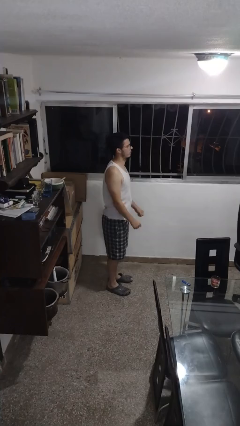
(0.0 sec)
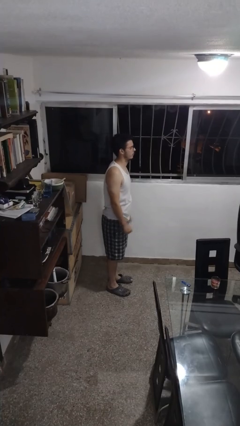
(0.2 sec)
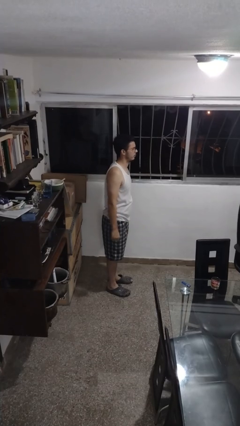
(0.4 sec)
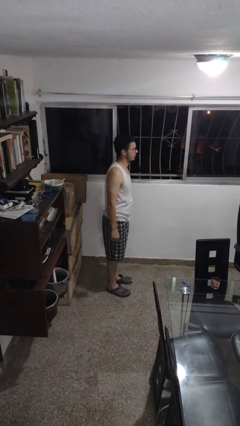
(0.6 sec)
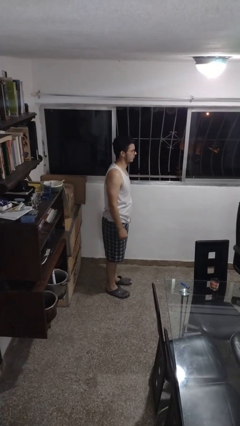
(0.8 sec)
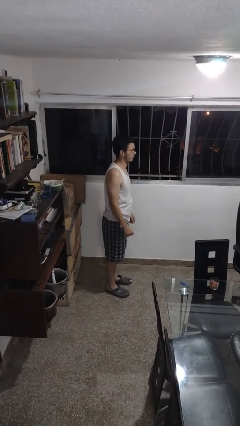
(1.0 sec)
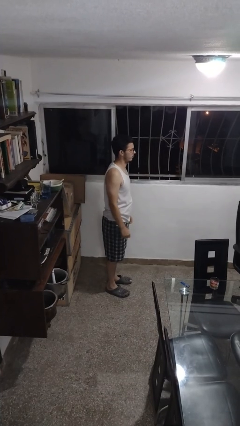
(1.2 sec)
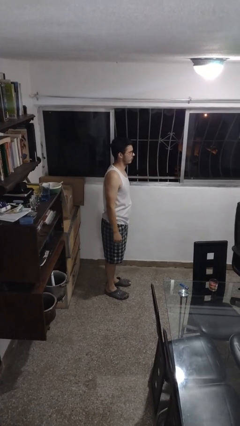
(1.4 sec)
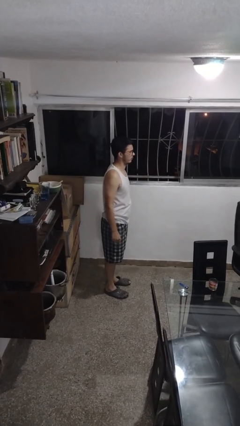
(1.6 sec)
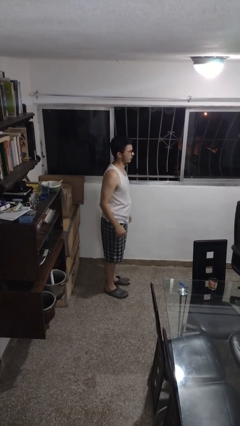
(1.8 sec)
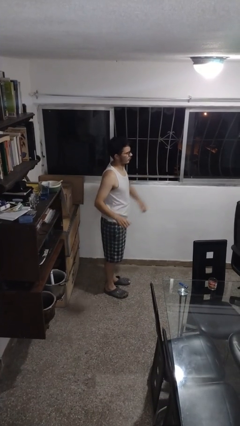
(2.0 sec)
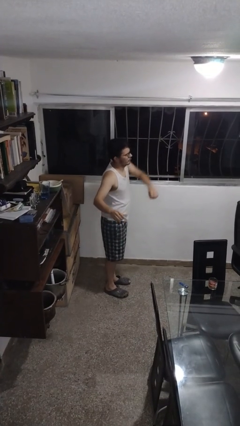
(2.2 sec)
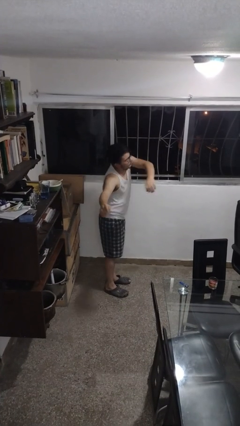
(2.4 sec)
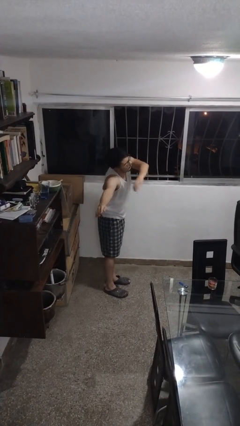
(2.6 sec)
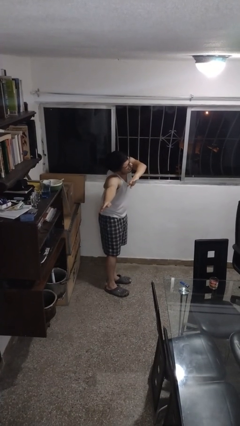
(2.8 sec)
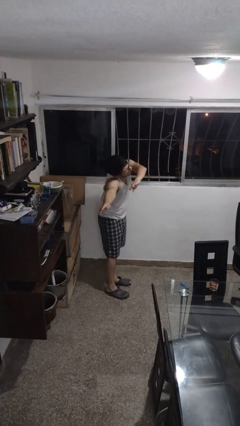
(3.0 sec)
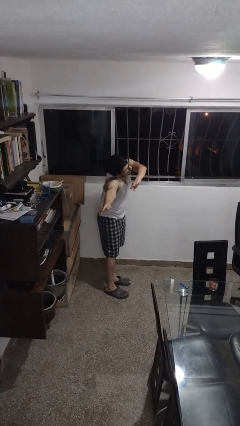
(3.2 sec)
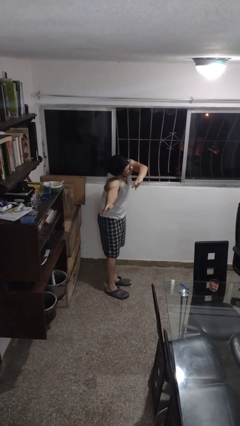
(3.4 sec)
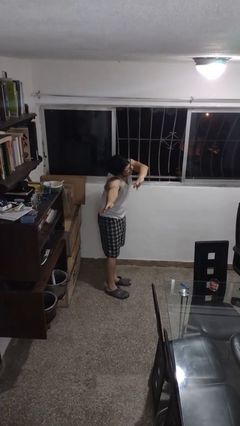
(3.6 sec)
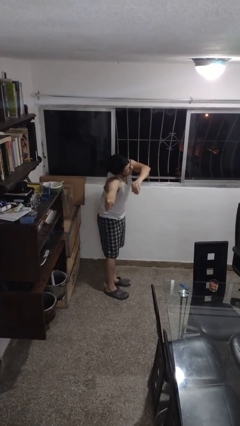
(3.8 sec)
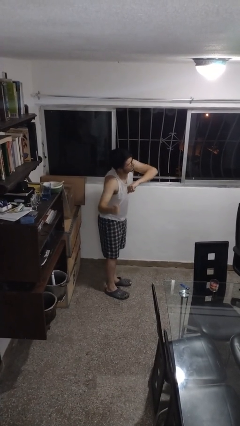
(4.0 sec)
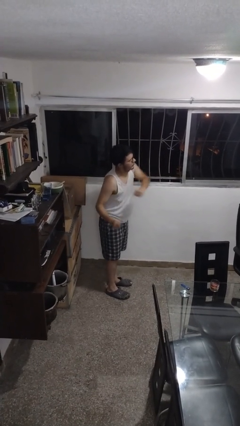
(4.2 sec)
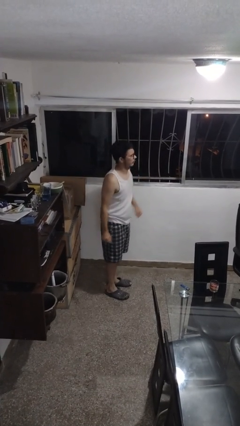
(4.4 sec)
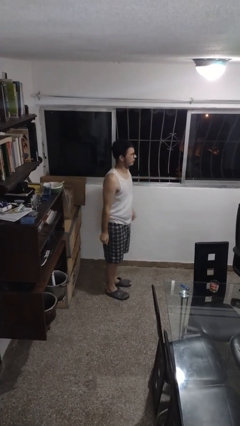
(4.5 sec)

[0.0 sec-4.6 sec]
person stretches arms to side

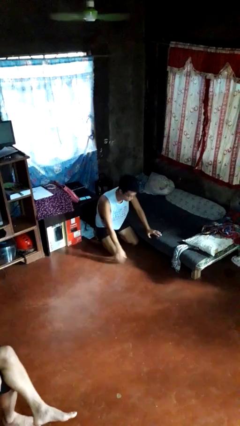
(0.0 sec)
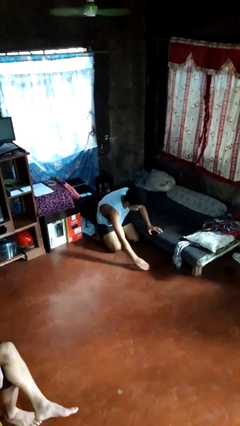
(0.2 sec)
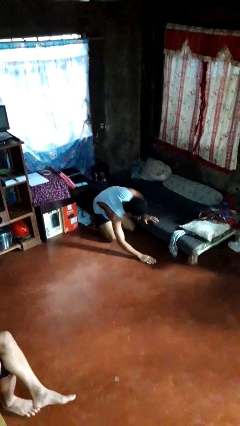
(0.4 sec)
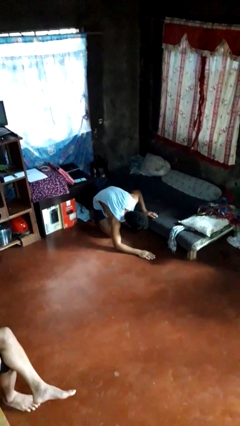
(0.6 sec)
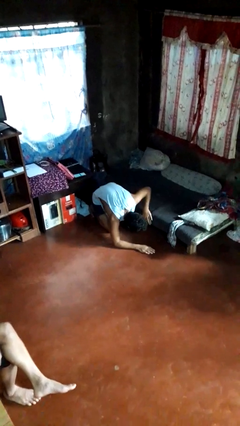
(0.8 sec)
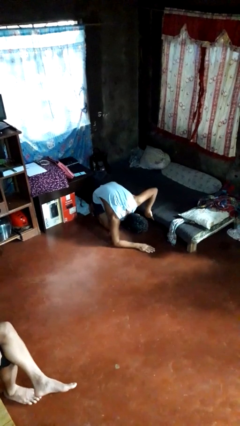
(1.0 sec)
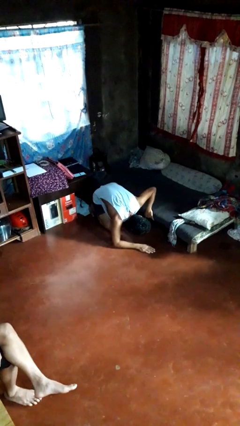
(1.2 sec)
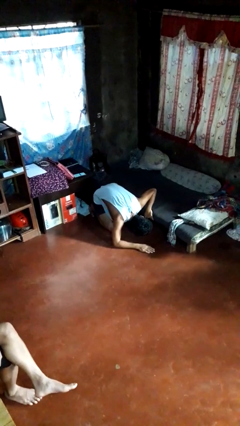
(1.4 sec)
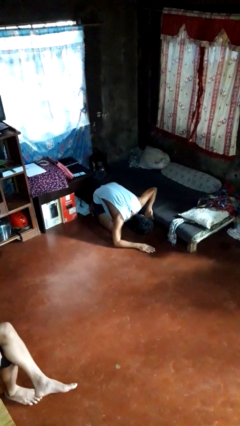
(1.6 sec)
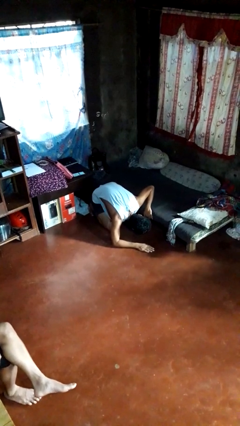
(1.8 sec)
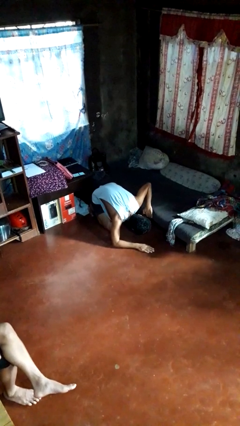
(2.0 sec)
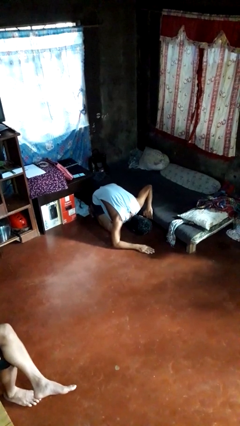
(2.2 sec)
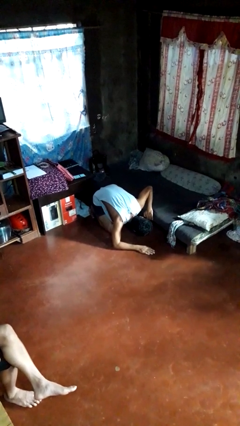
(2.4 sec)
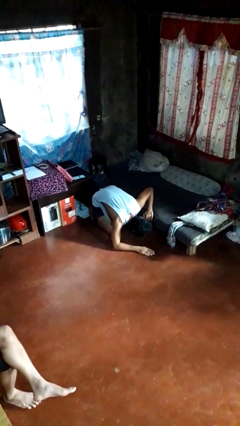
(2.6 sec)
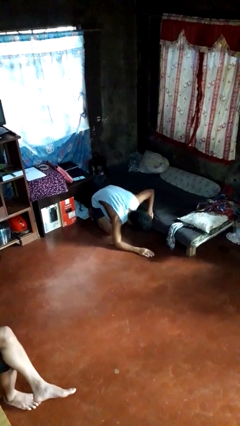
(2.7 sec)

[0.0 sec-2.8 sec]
person searches under bed

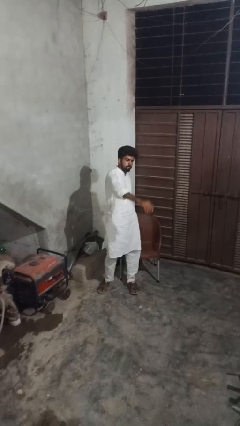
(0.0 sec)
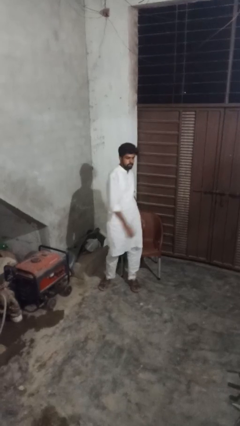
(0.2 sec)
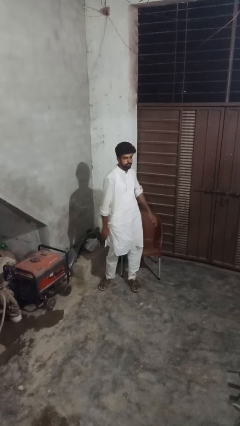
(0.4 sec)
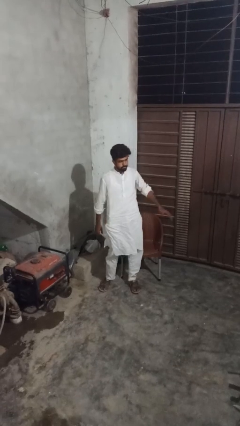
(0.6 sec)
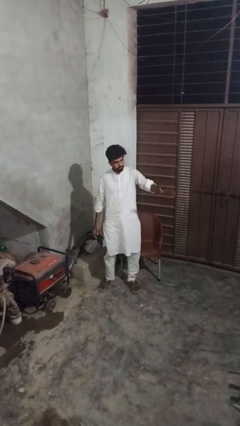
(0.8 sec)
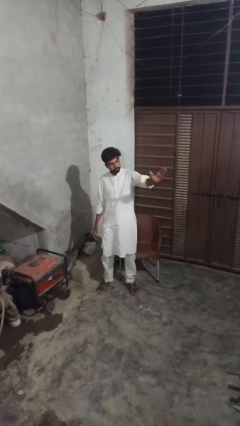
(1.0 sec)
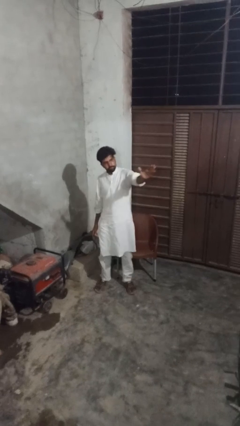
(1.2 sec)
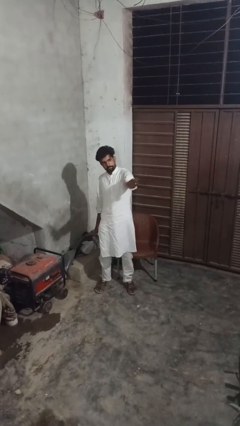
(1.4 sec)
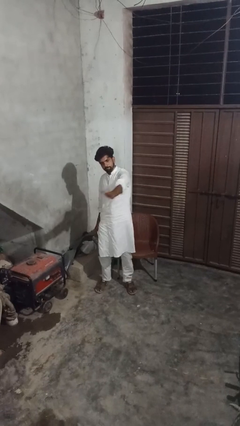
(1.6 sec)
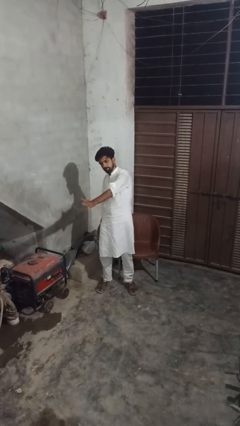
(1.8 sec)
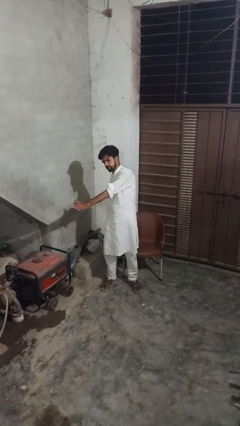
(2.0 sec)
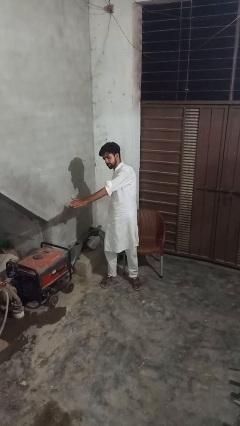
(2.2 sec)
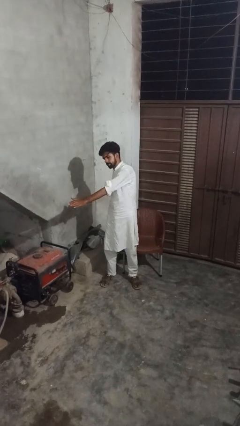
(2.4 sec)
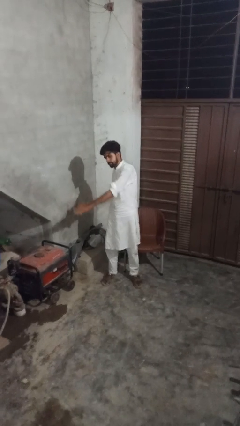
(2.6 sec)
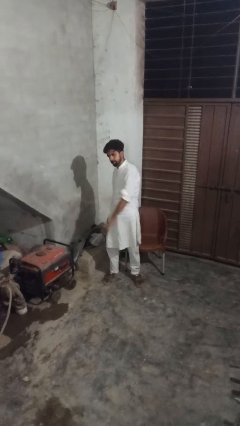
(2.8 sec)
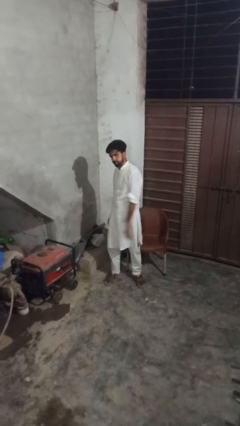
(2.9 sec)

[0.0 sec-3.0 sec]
person gestures swipe right

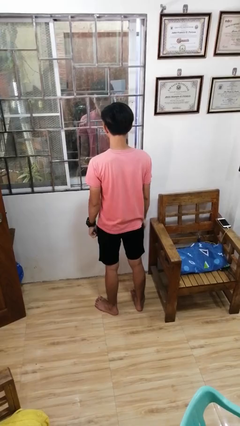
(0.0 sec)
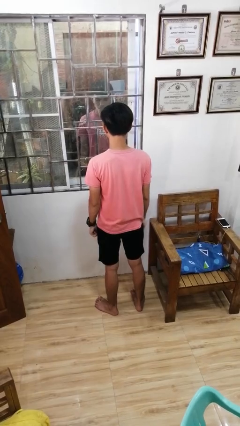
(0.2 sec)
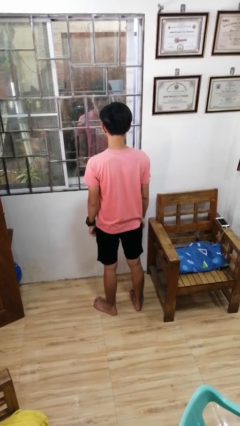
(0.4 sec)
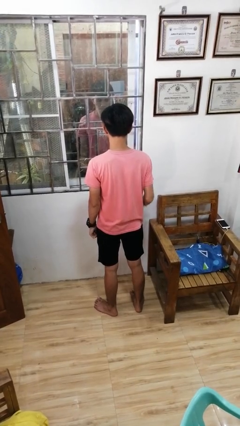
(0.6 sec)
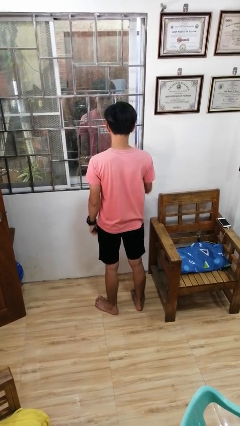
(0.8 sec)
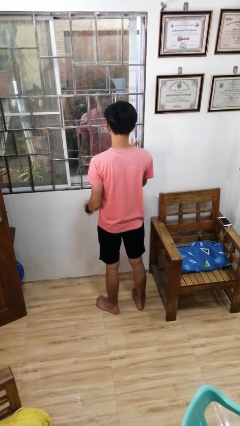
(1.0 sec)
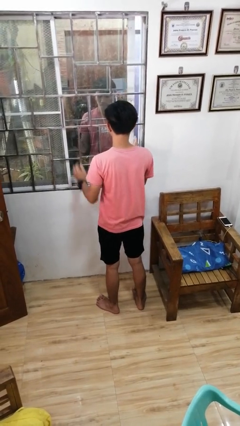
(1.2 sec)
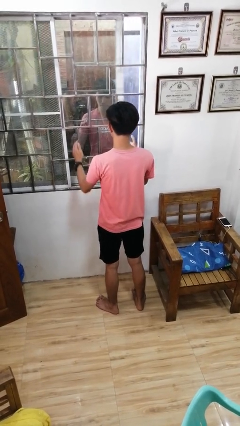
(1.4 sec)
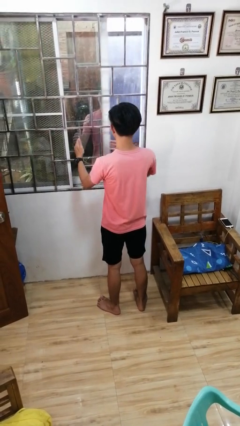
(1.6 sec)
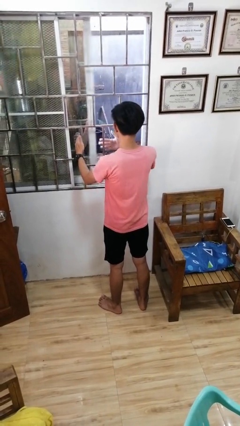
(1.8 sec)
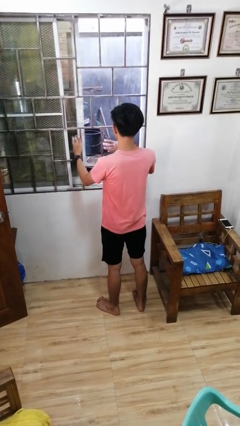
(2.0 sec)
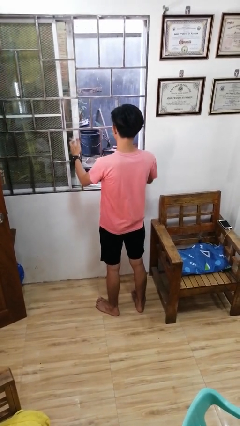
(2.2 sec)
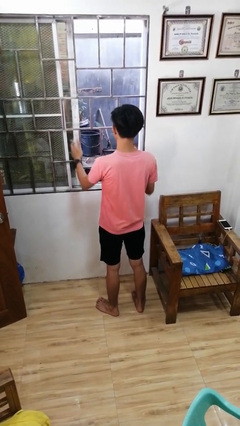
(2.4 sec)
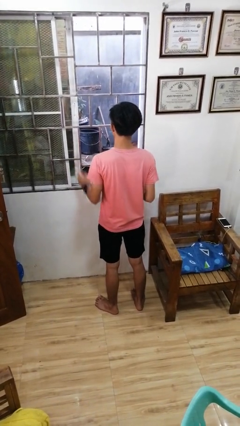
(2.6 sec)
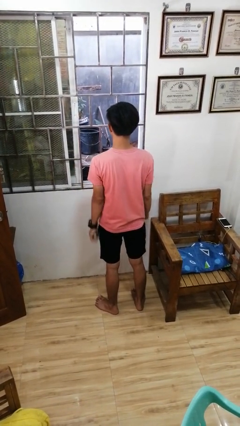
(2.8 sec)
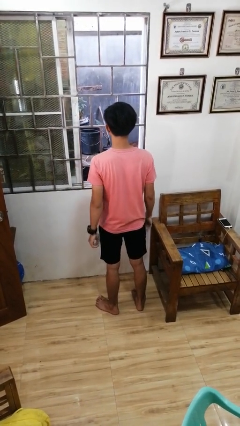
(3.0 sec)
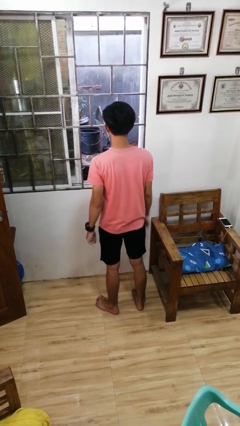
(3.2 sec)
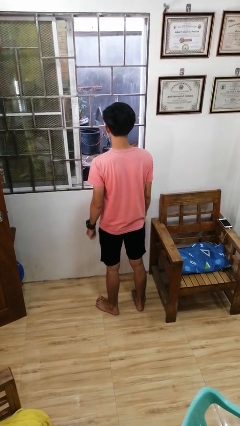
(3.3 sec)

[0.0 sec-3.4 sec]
person opens home window

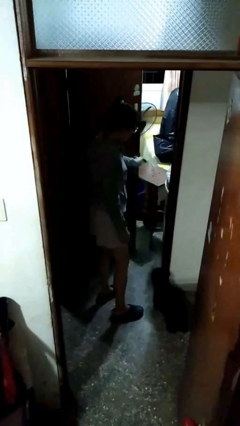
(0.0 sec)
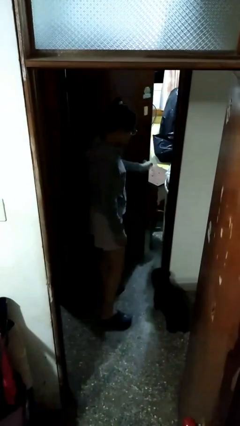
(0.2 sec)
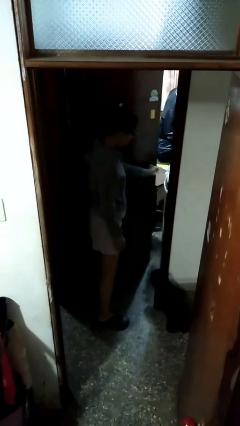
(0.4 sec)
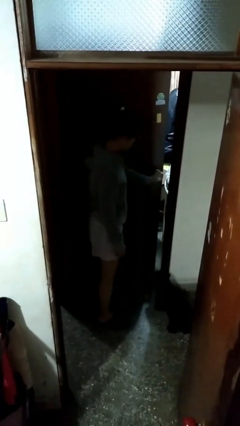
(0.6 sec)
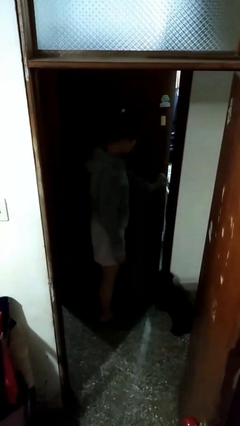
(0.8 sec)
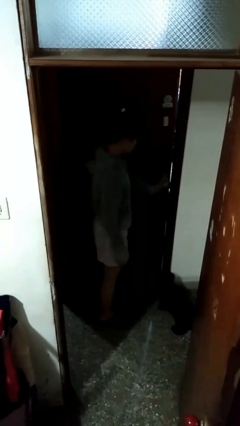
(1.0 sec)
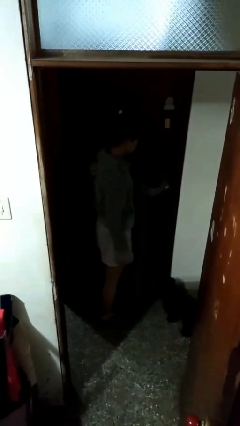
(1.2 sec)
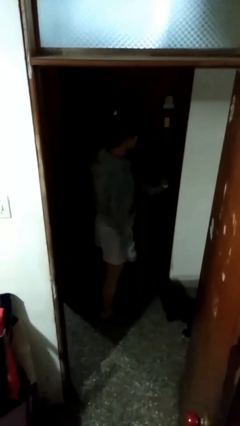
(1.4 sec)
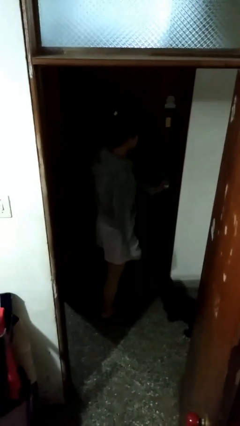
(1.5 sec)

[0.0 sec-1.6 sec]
person closes facility door

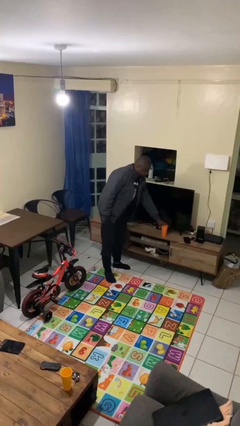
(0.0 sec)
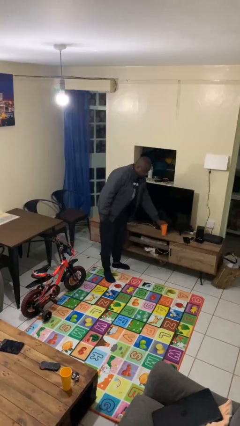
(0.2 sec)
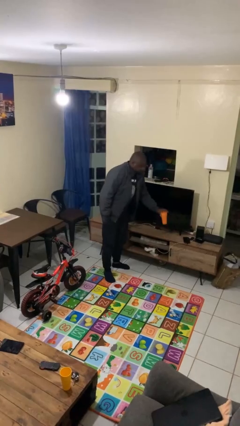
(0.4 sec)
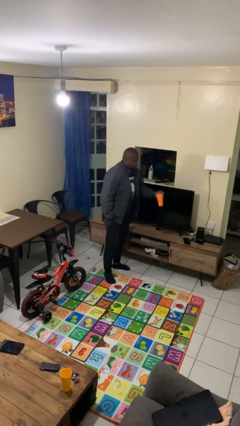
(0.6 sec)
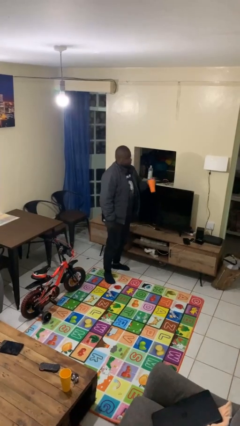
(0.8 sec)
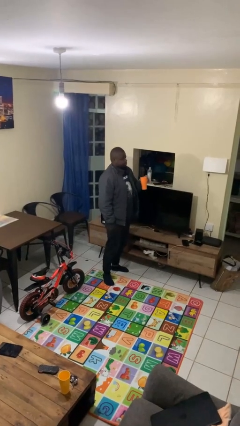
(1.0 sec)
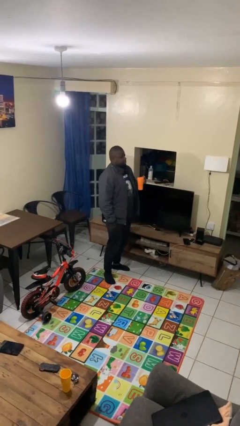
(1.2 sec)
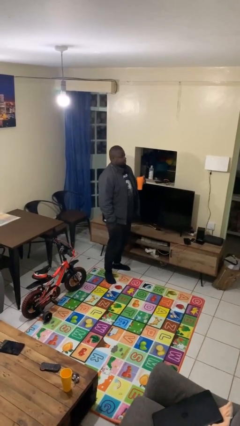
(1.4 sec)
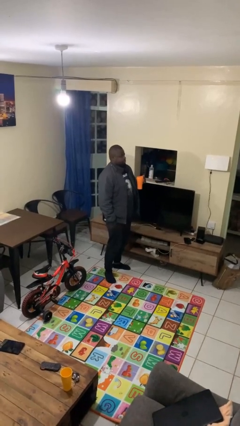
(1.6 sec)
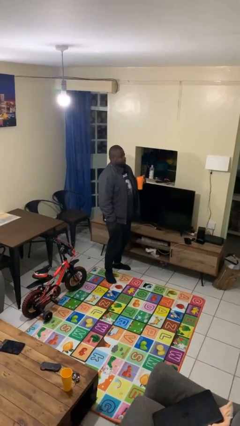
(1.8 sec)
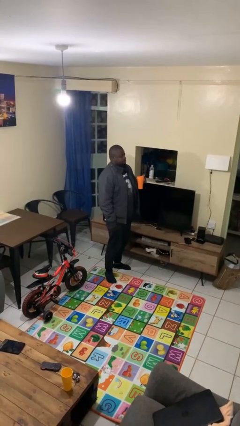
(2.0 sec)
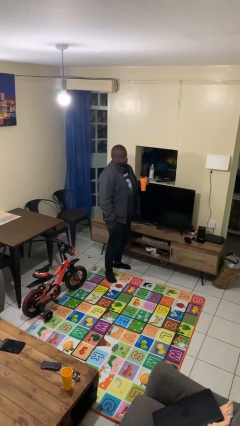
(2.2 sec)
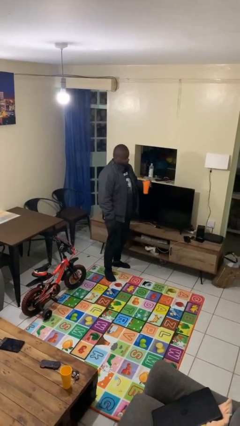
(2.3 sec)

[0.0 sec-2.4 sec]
person picks up object from countertop
